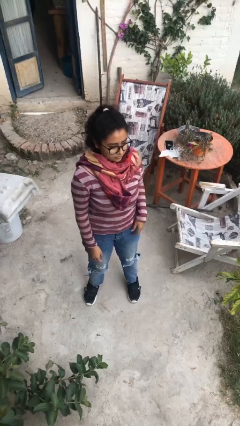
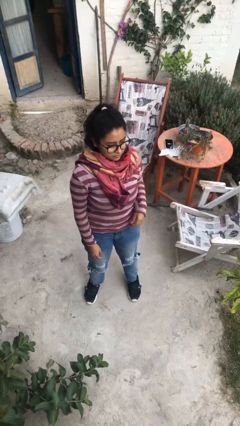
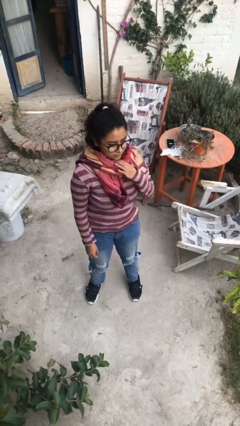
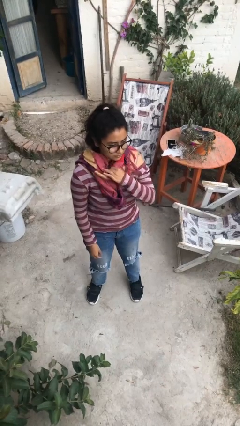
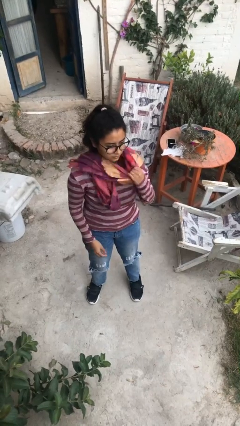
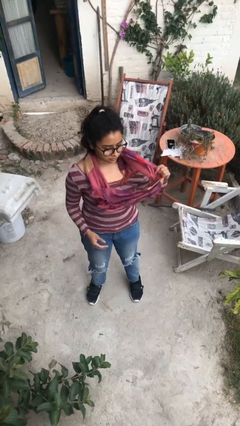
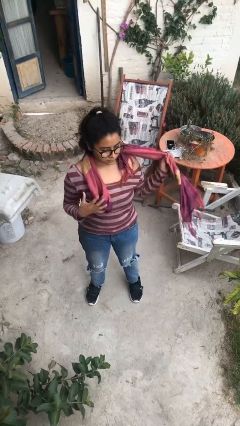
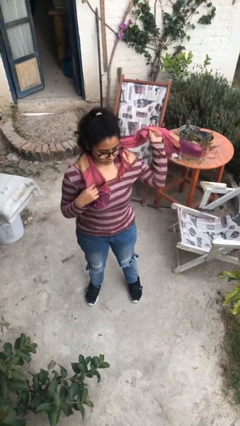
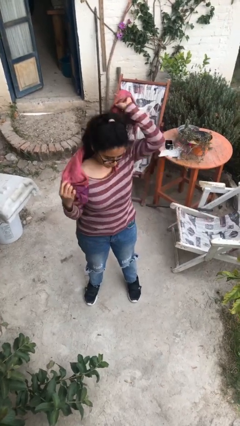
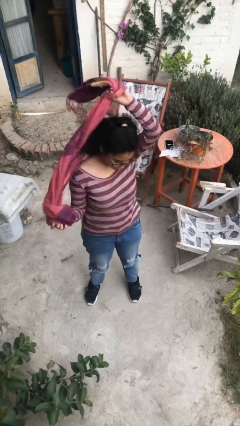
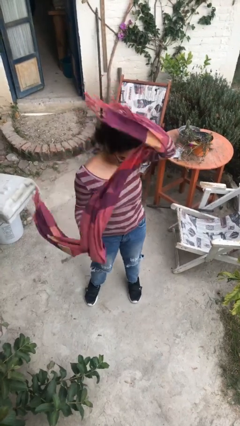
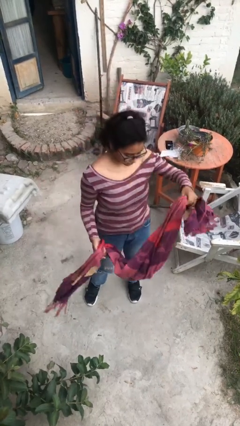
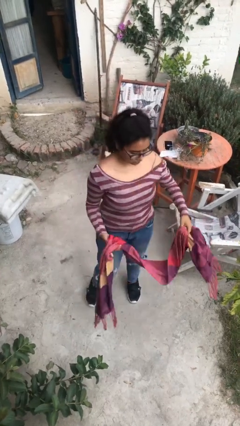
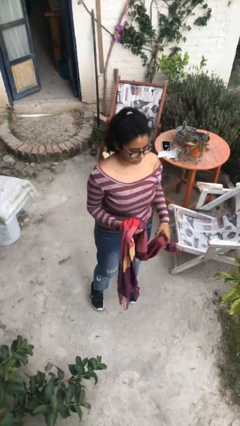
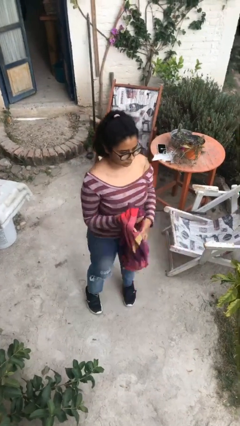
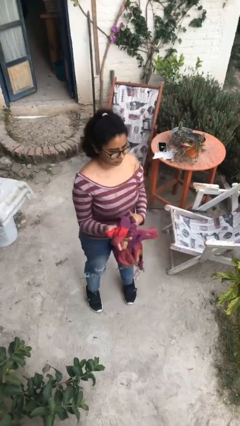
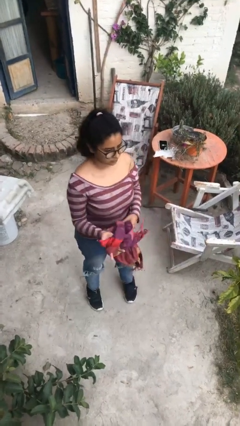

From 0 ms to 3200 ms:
person takes off scarf

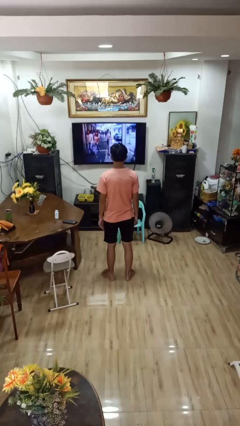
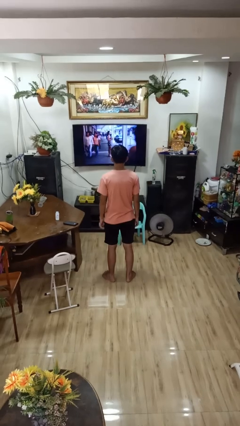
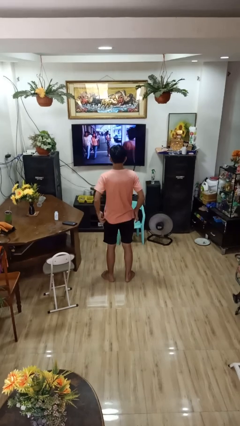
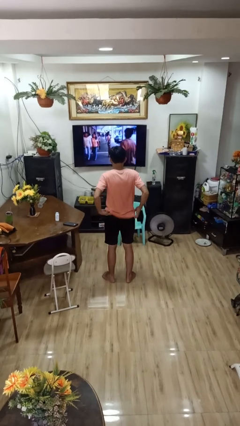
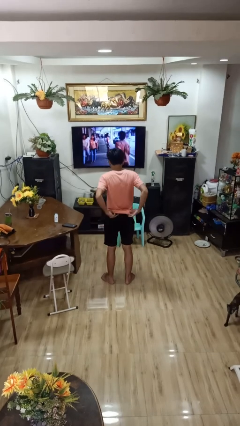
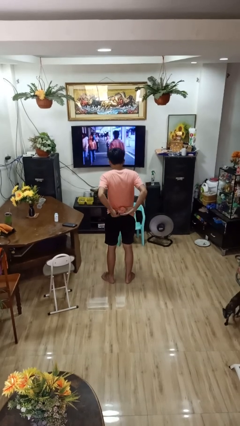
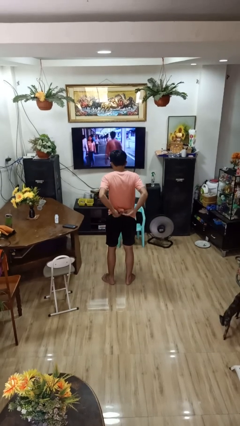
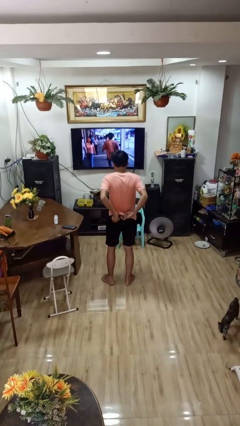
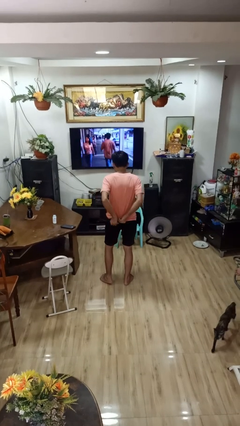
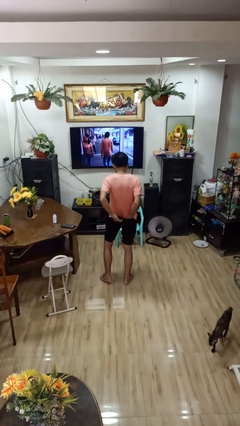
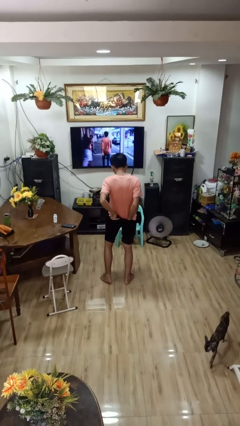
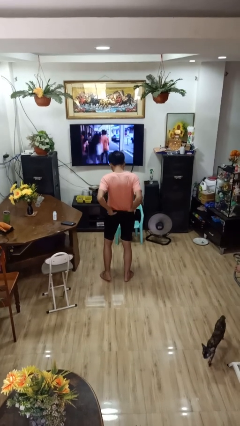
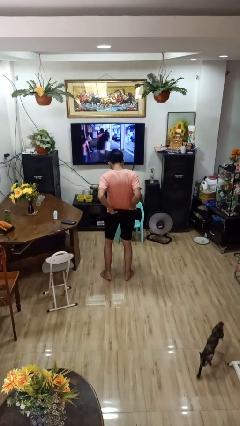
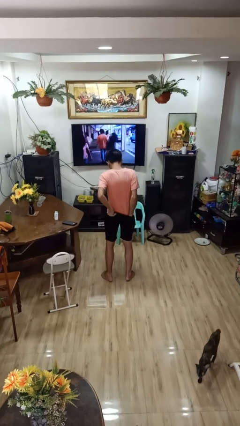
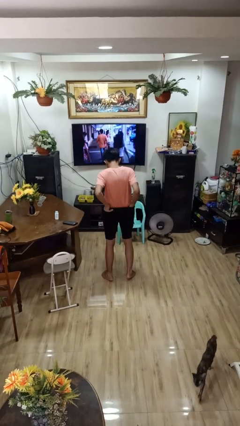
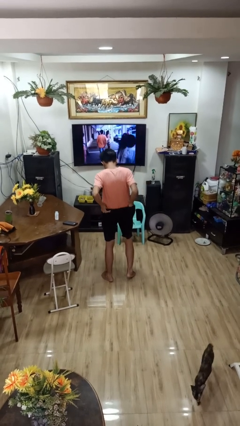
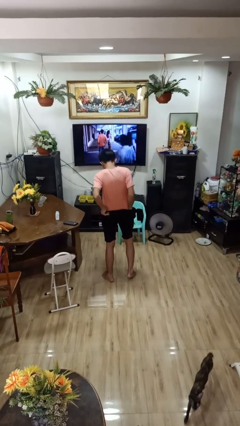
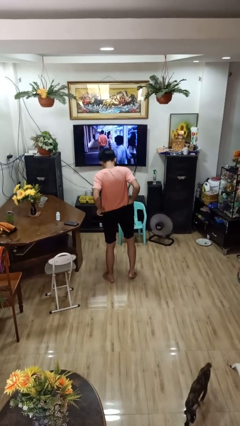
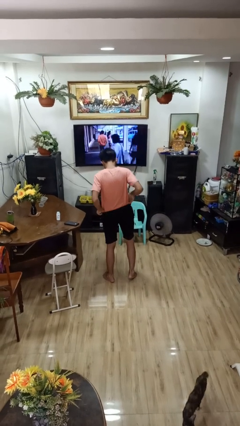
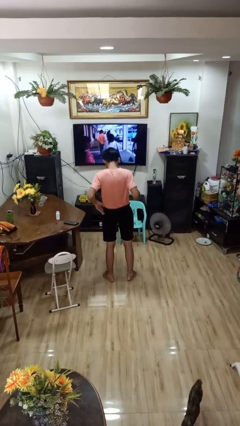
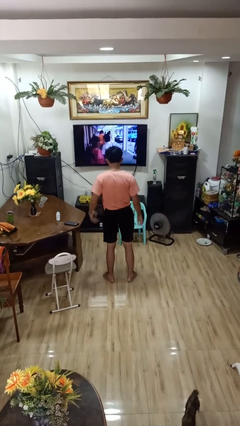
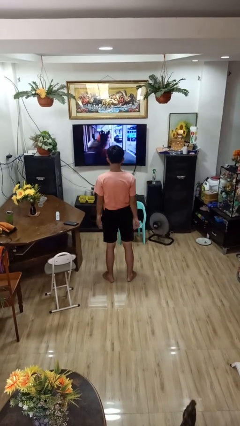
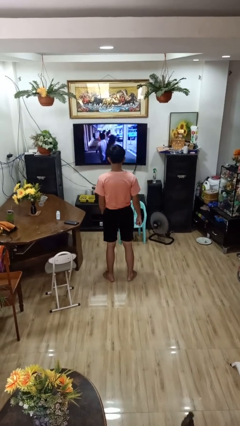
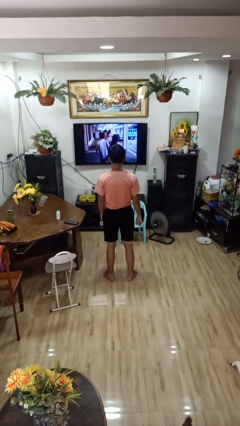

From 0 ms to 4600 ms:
person tucks in shirt

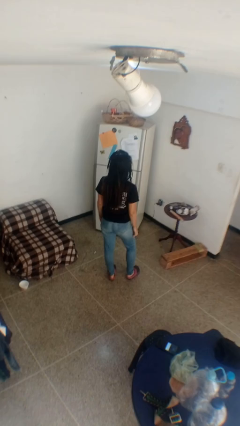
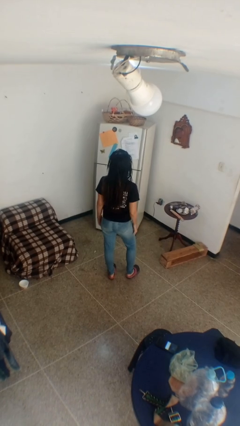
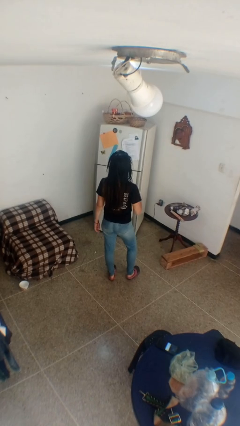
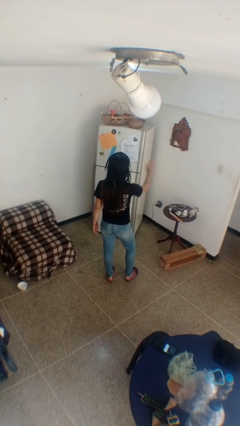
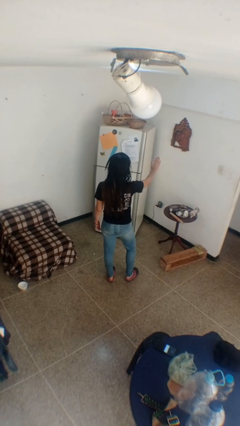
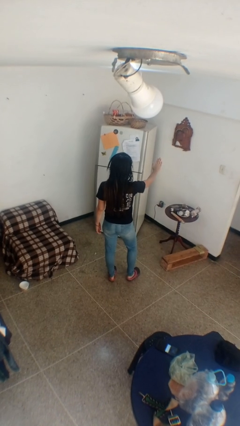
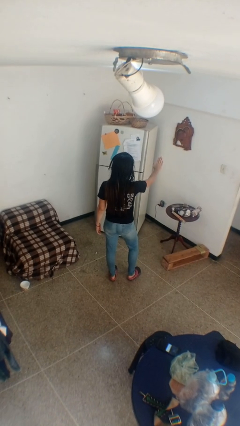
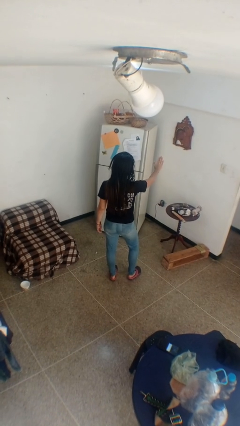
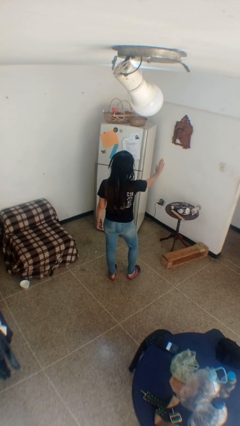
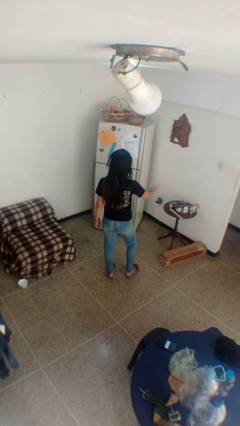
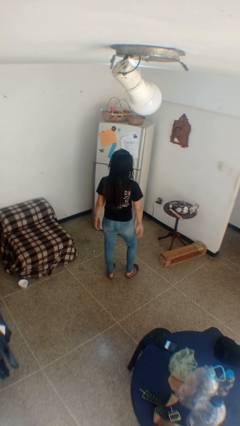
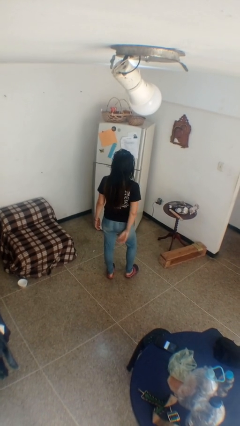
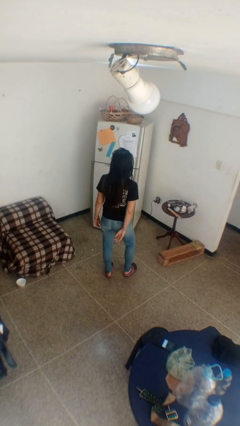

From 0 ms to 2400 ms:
person gestures stop

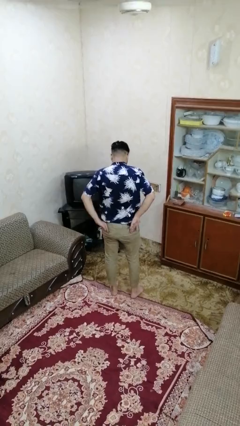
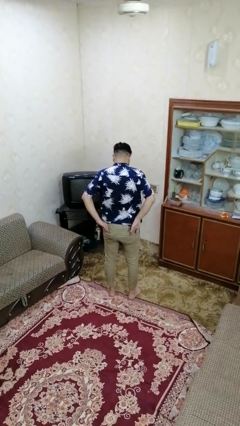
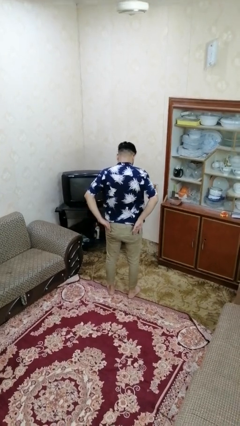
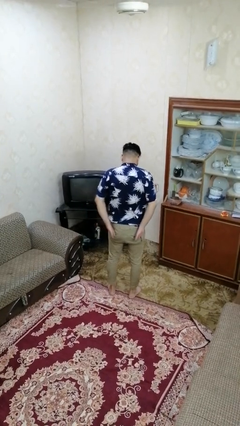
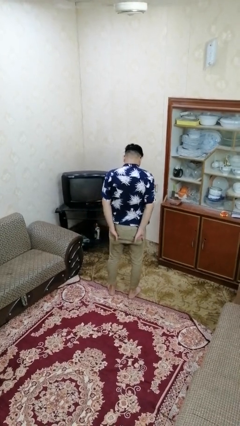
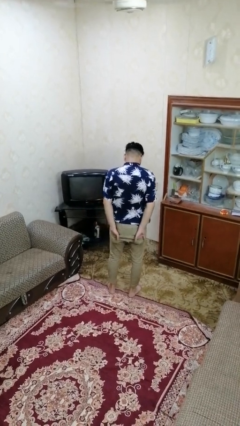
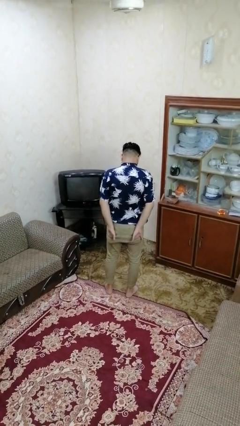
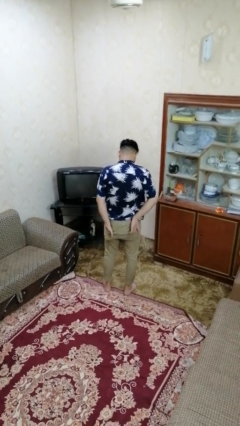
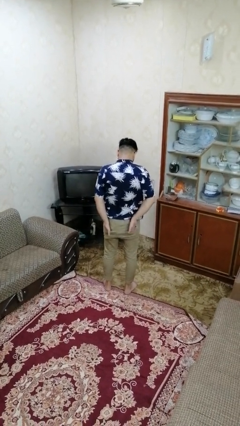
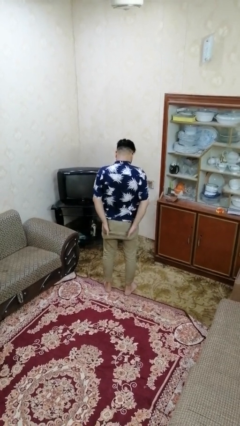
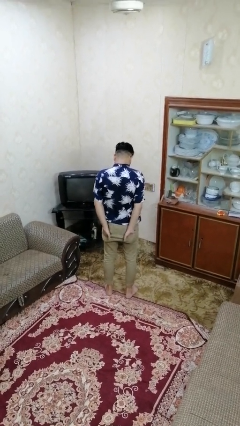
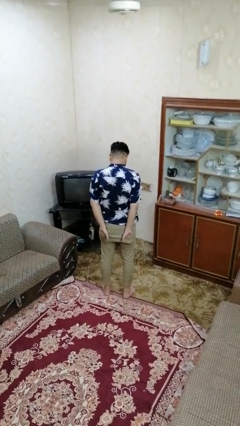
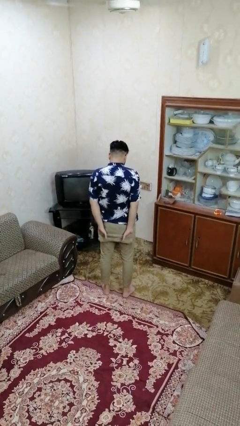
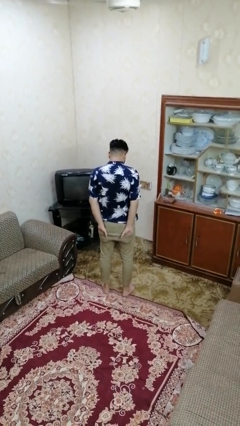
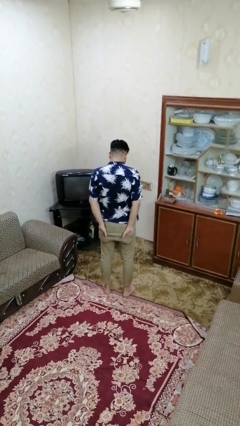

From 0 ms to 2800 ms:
person puts hands in back pockets

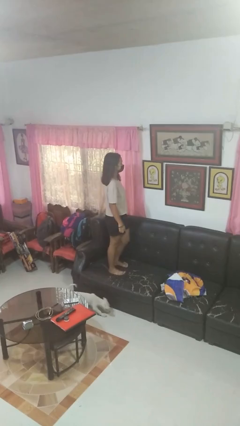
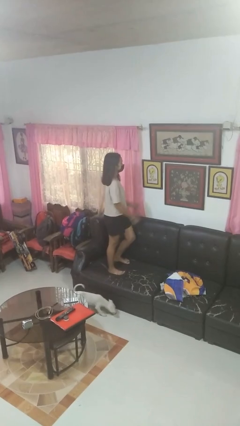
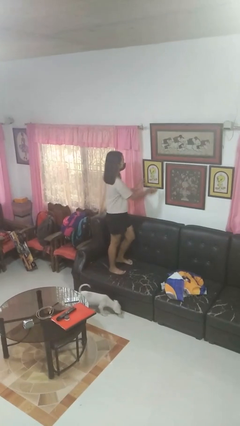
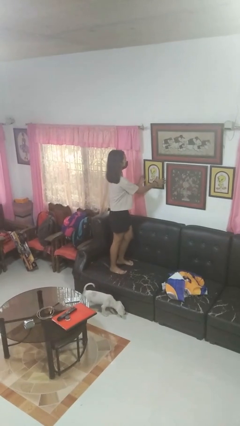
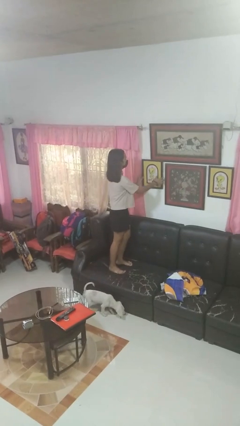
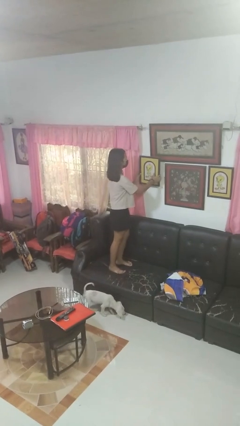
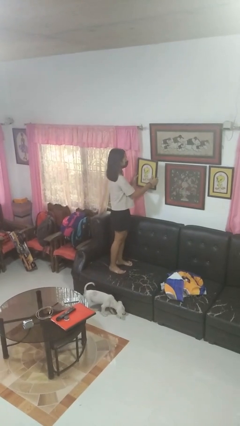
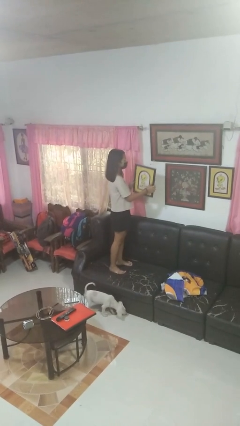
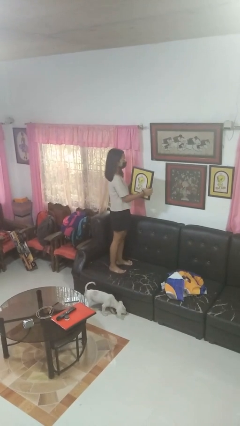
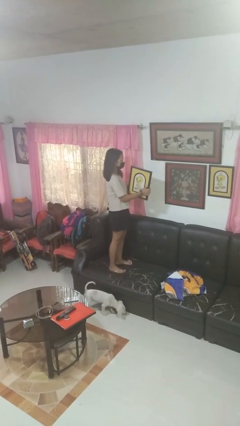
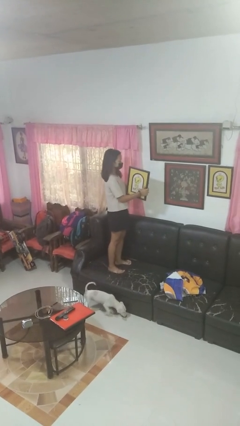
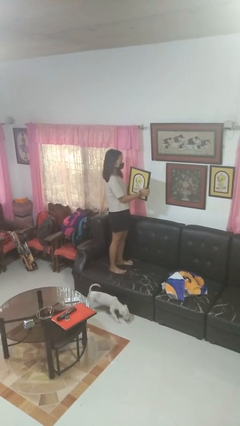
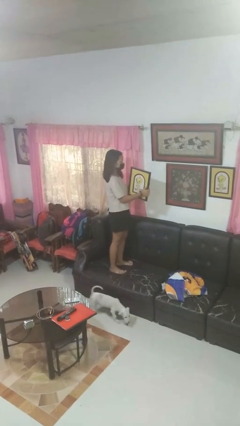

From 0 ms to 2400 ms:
person takes down picture frame

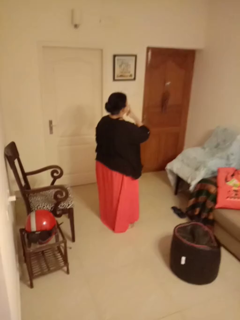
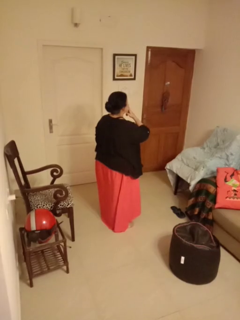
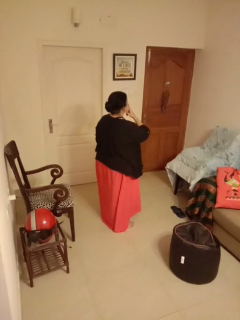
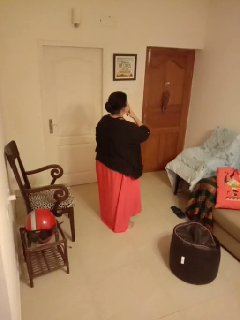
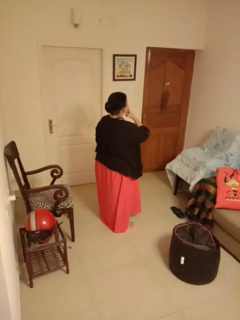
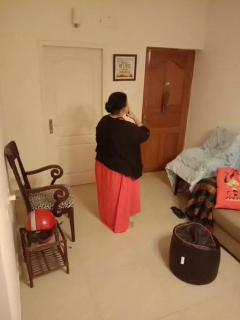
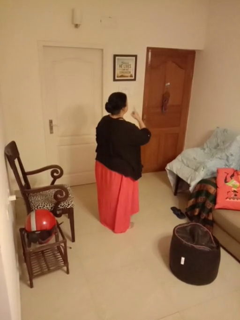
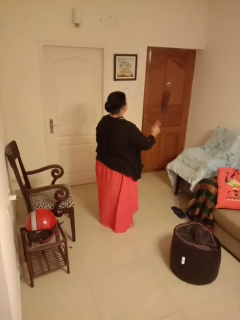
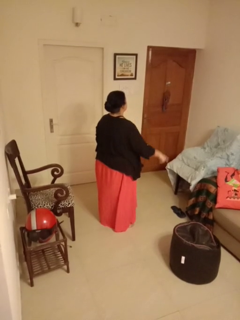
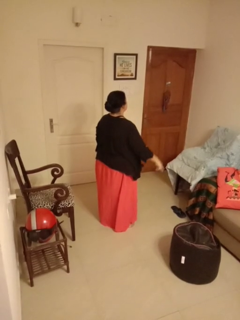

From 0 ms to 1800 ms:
person gestures be quiet

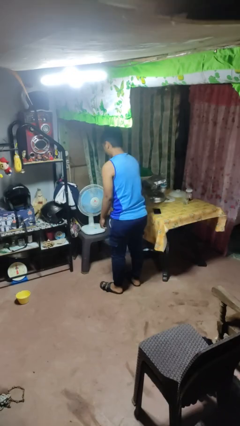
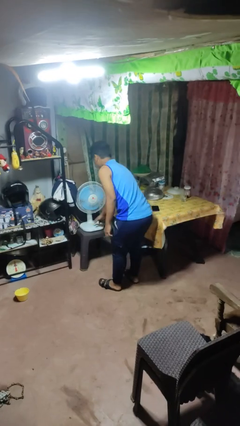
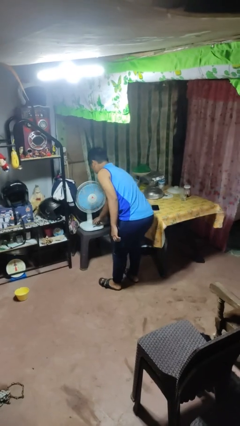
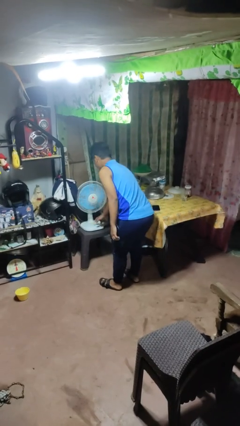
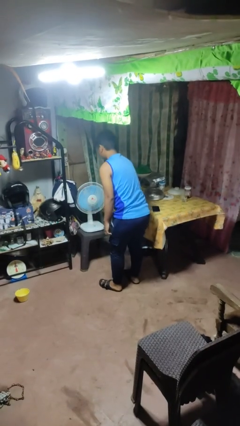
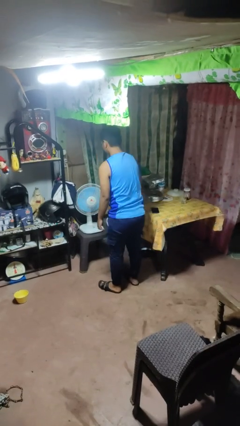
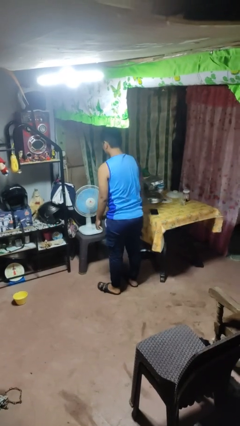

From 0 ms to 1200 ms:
person turns on fan
